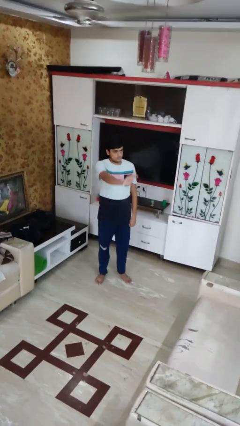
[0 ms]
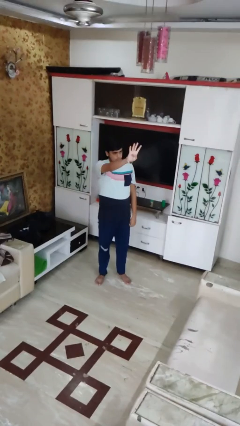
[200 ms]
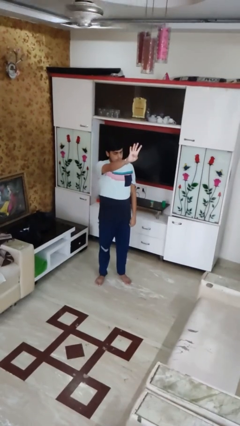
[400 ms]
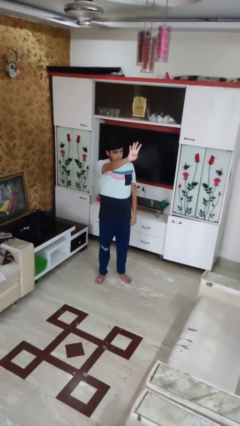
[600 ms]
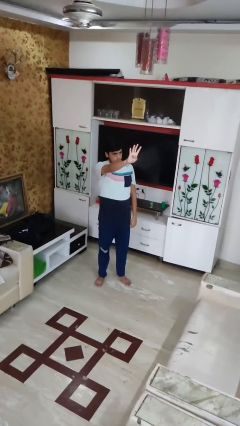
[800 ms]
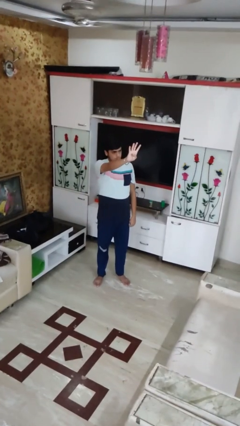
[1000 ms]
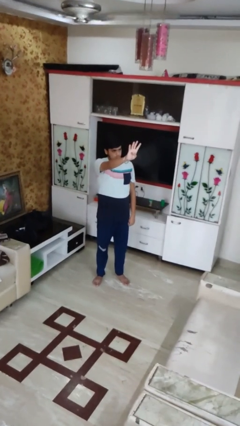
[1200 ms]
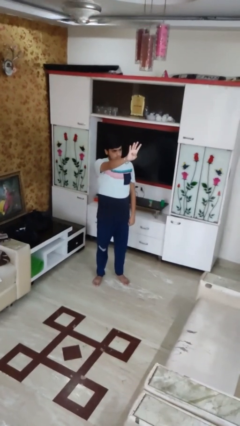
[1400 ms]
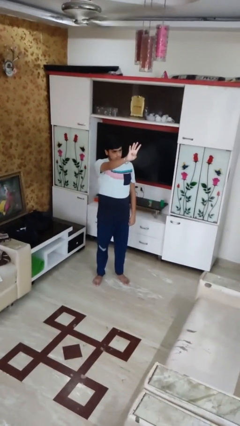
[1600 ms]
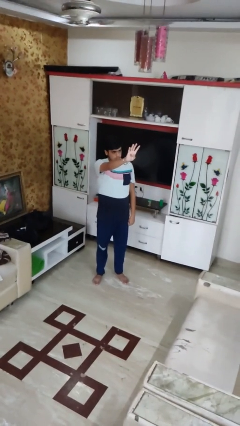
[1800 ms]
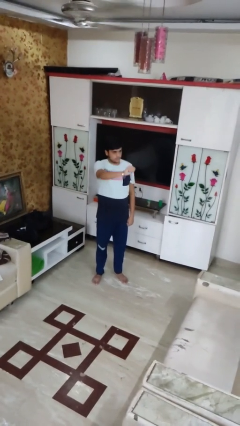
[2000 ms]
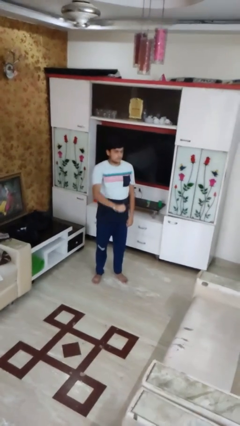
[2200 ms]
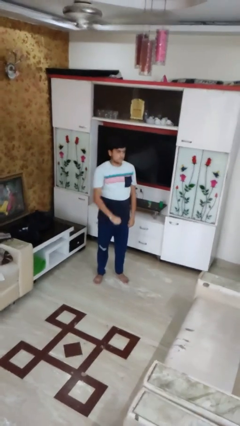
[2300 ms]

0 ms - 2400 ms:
person gestures number four

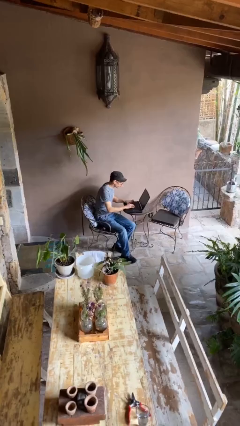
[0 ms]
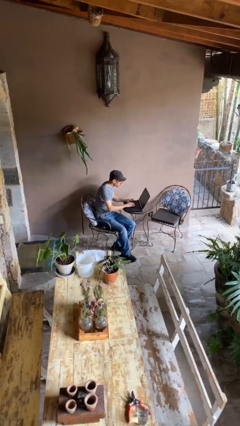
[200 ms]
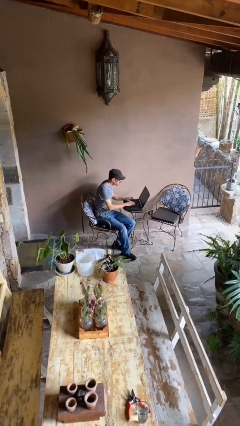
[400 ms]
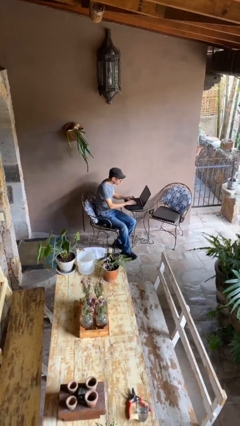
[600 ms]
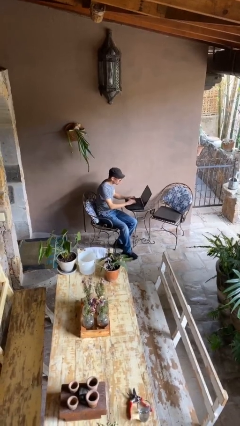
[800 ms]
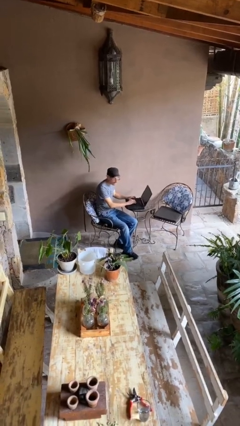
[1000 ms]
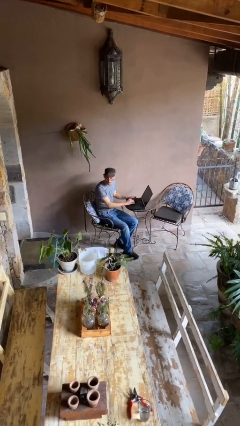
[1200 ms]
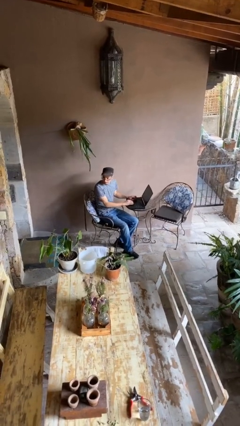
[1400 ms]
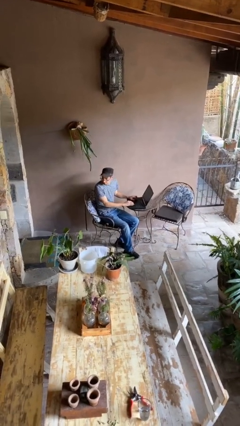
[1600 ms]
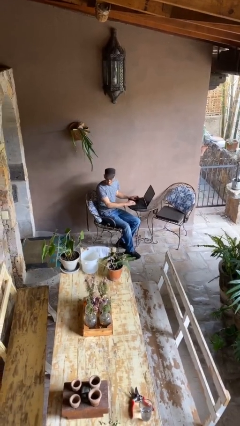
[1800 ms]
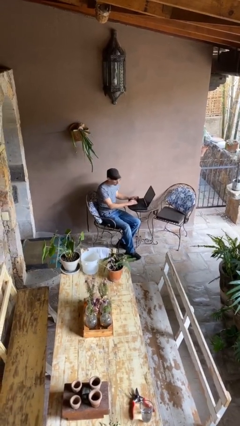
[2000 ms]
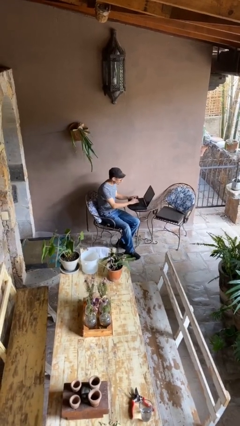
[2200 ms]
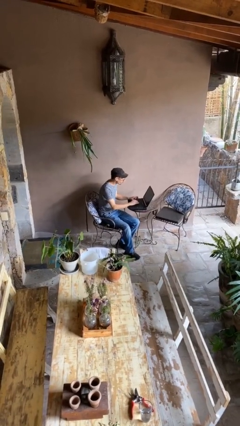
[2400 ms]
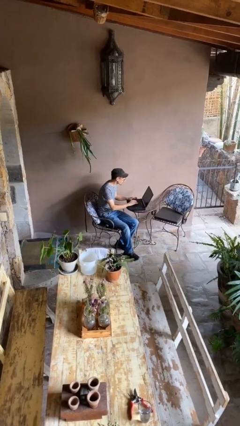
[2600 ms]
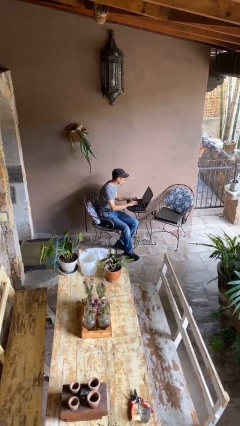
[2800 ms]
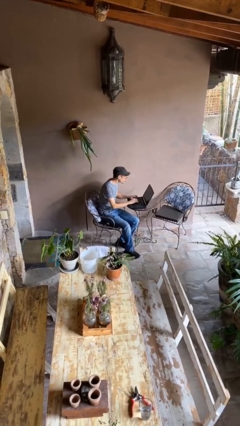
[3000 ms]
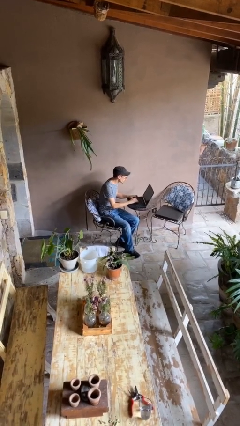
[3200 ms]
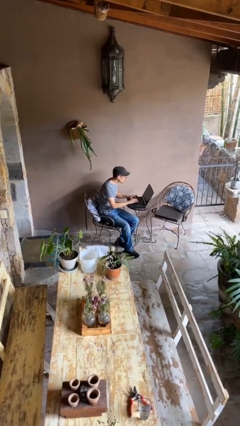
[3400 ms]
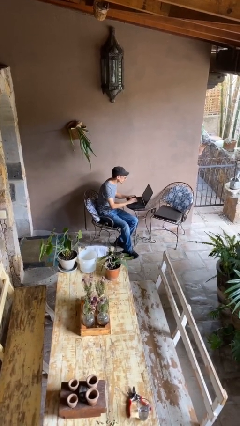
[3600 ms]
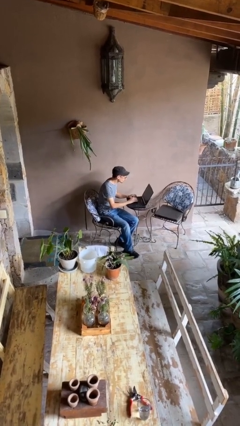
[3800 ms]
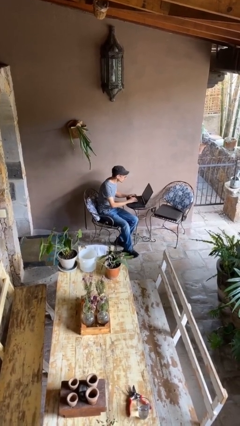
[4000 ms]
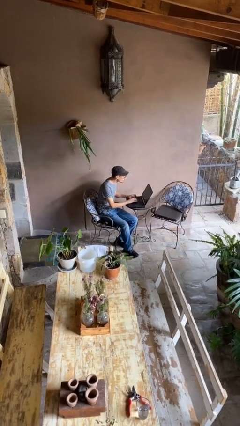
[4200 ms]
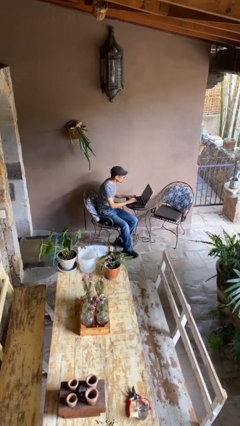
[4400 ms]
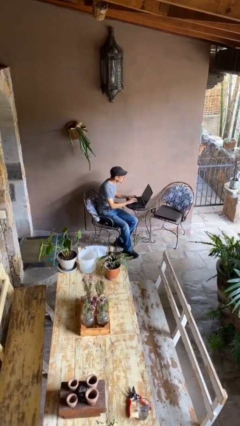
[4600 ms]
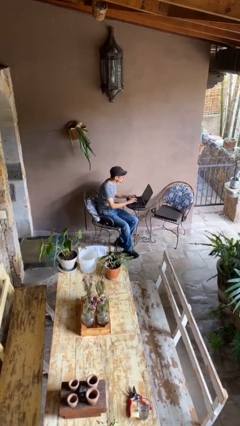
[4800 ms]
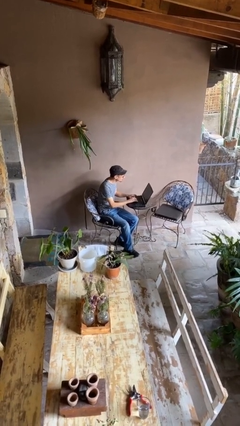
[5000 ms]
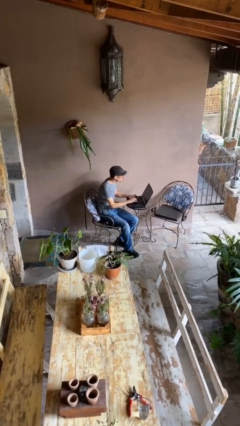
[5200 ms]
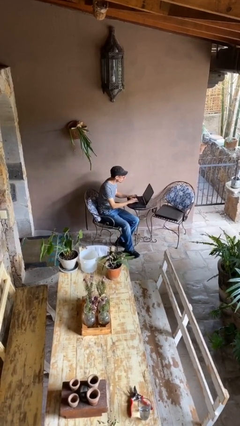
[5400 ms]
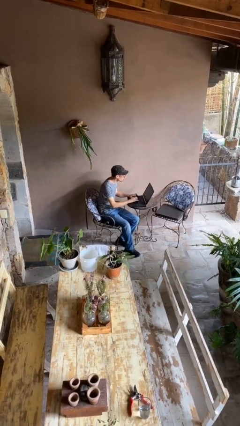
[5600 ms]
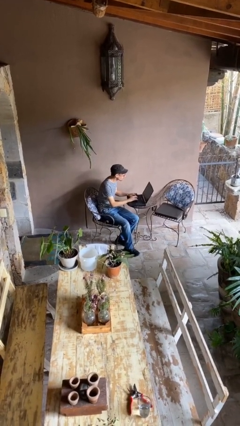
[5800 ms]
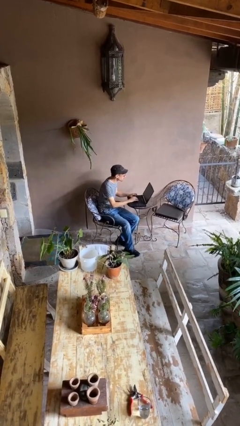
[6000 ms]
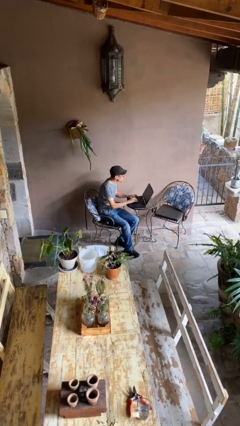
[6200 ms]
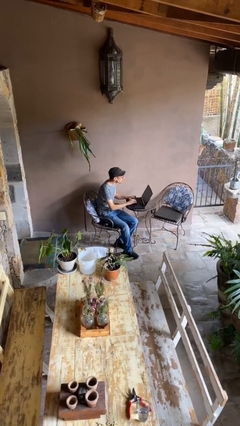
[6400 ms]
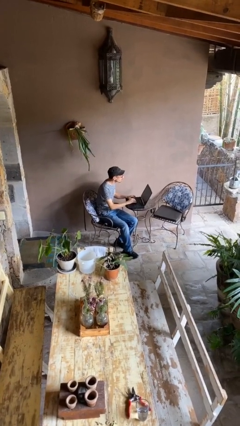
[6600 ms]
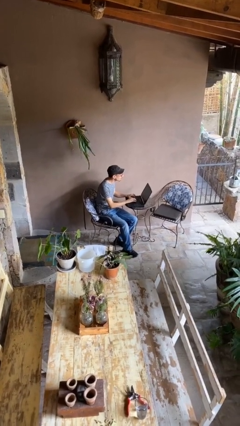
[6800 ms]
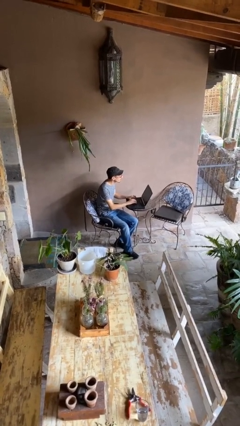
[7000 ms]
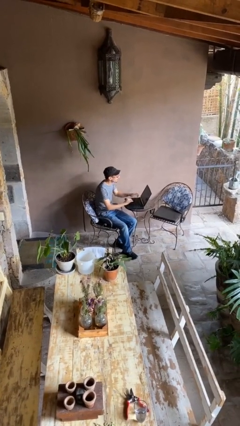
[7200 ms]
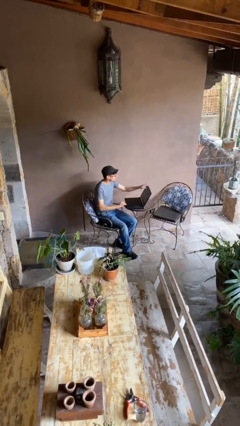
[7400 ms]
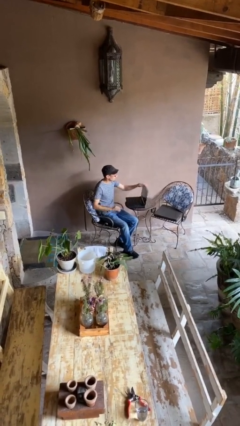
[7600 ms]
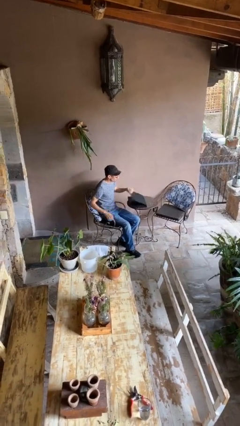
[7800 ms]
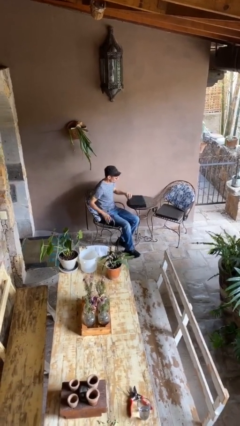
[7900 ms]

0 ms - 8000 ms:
person interacts with laptop

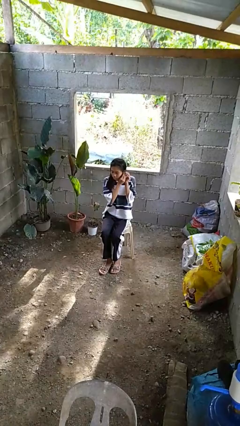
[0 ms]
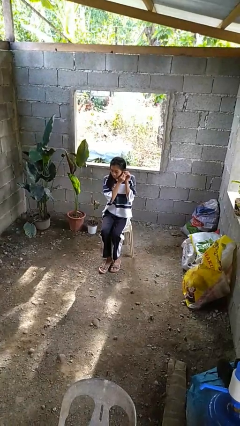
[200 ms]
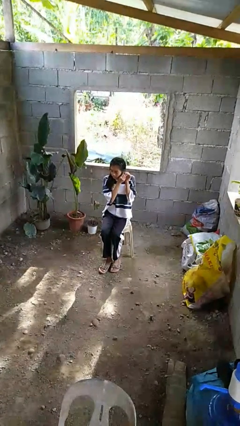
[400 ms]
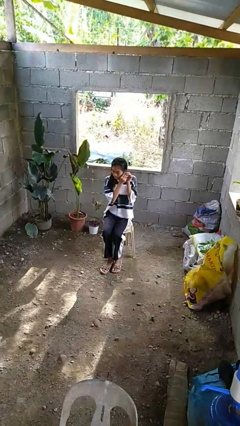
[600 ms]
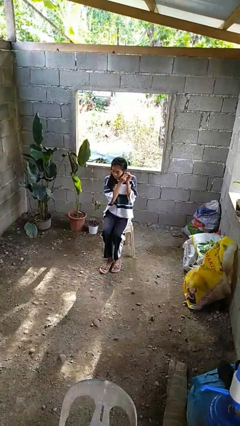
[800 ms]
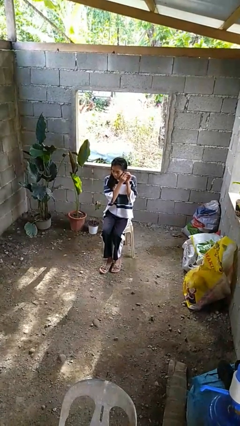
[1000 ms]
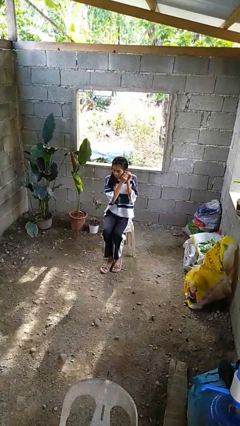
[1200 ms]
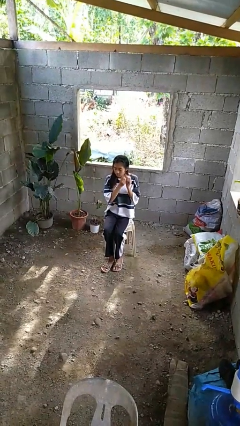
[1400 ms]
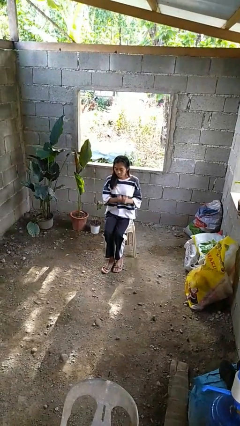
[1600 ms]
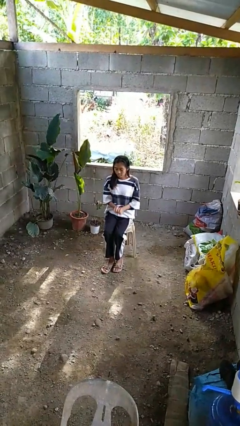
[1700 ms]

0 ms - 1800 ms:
person takes off earrings

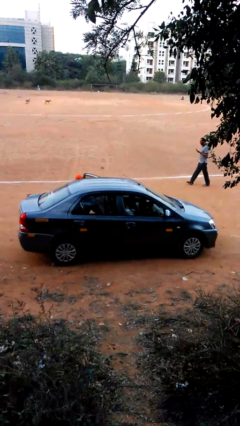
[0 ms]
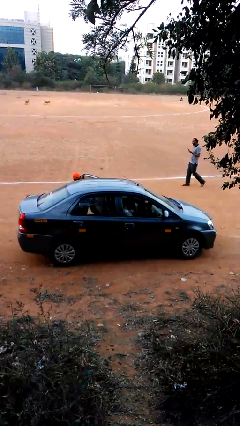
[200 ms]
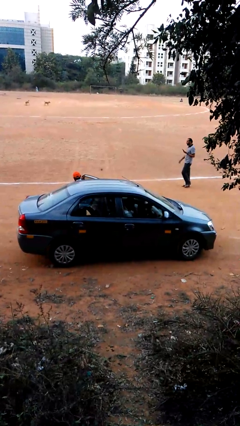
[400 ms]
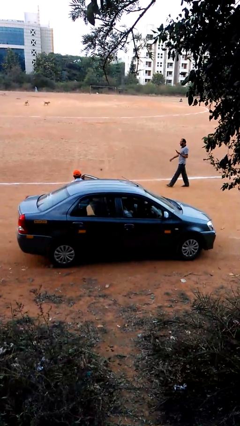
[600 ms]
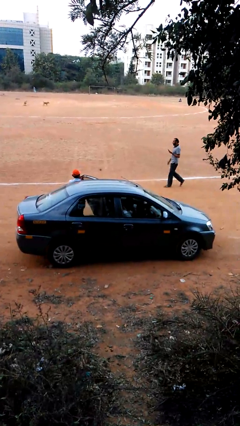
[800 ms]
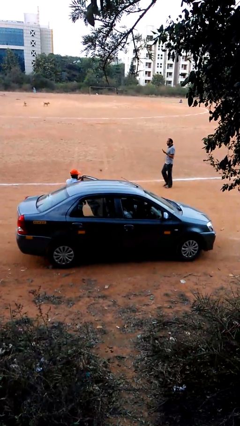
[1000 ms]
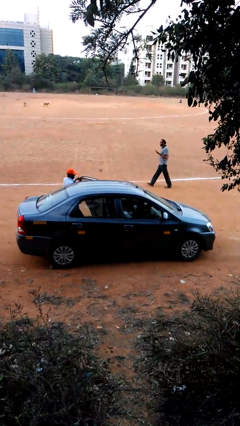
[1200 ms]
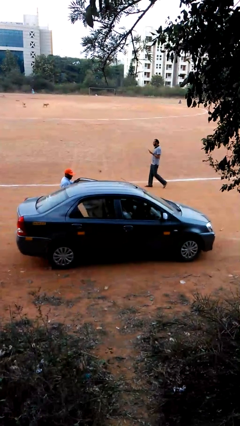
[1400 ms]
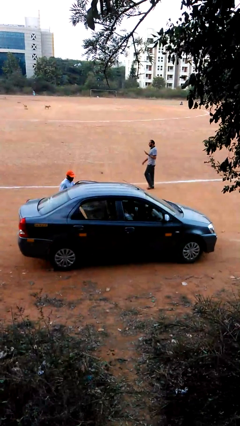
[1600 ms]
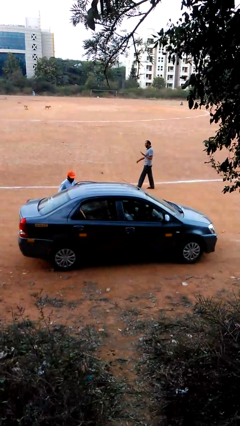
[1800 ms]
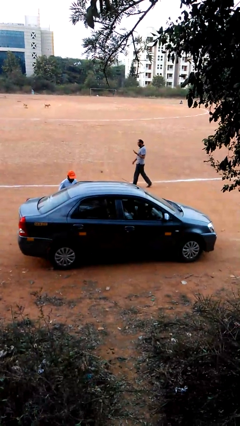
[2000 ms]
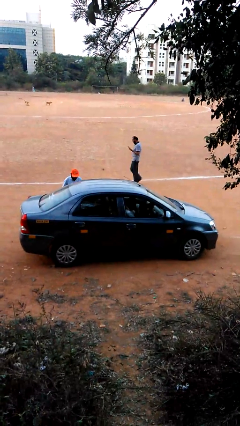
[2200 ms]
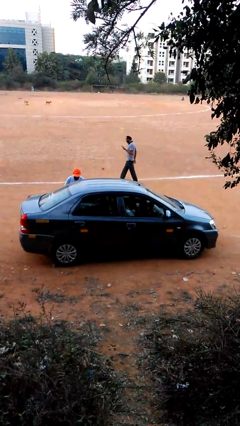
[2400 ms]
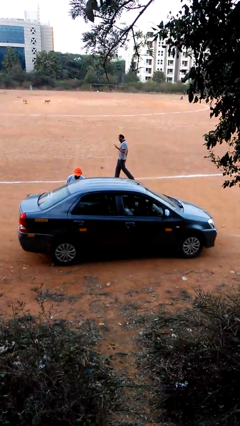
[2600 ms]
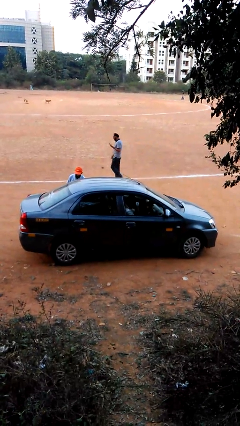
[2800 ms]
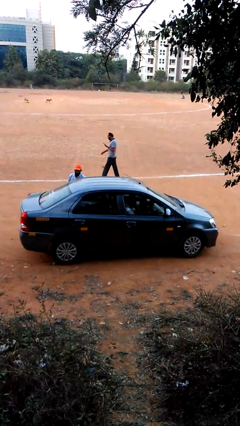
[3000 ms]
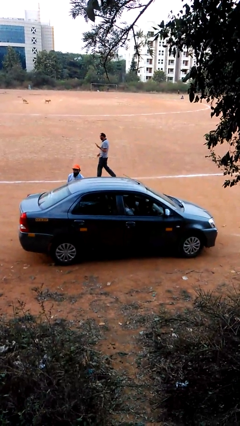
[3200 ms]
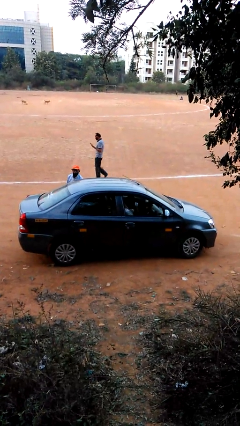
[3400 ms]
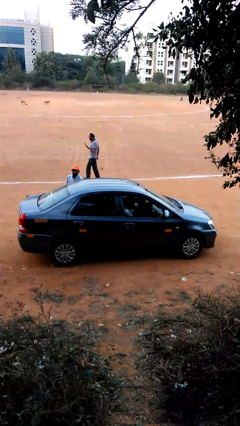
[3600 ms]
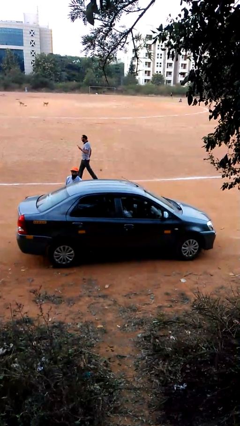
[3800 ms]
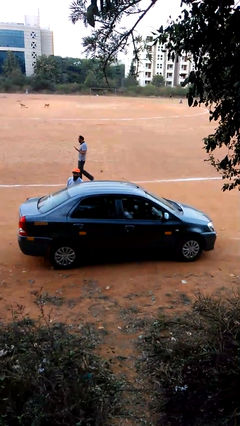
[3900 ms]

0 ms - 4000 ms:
car drops off person

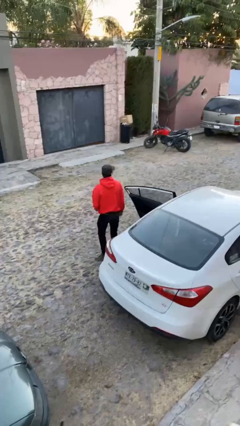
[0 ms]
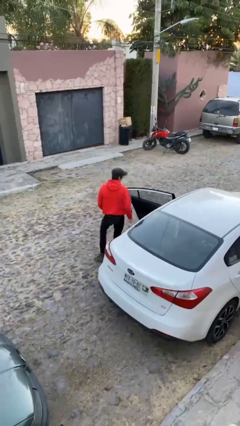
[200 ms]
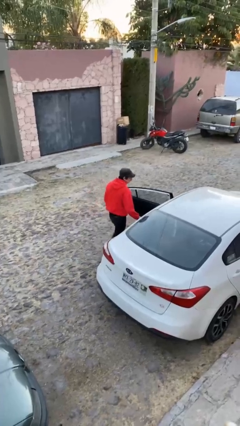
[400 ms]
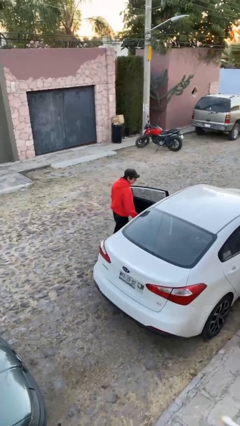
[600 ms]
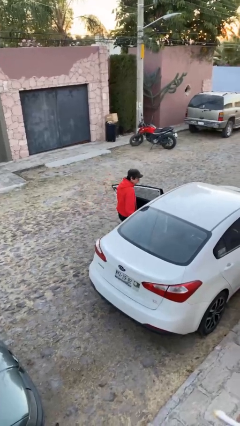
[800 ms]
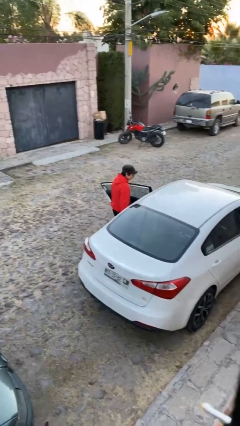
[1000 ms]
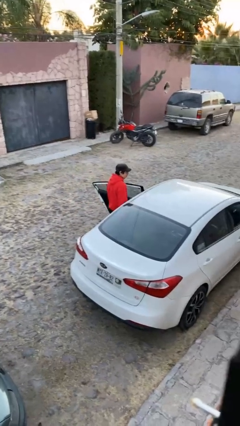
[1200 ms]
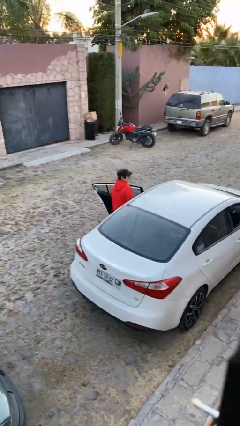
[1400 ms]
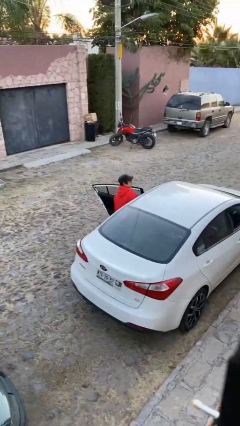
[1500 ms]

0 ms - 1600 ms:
person enters car
